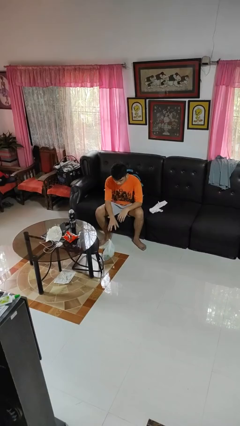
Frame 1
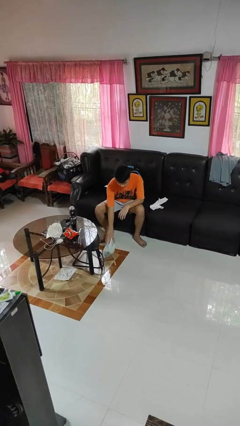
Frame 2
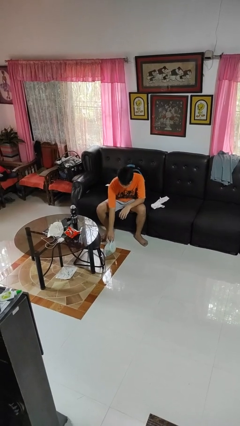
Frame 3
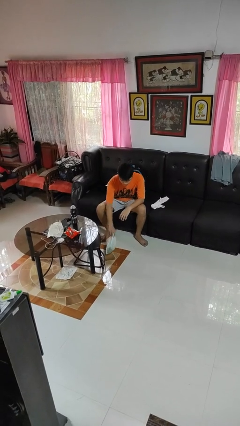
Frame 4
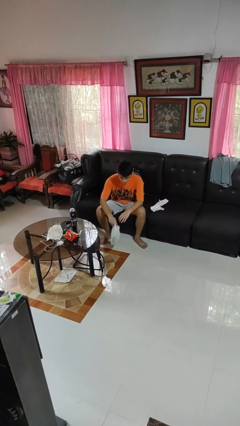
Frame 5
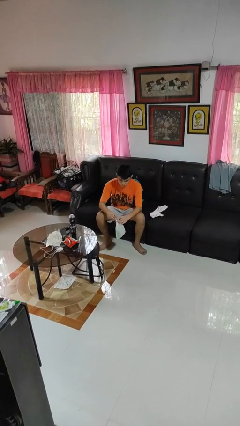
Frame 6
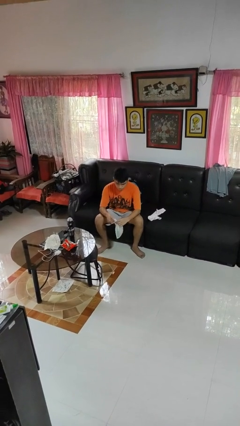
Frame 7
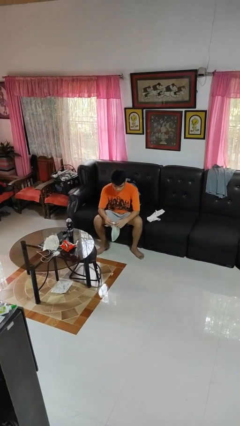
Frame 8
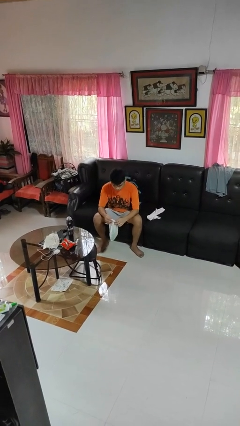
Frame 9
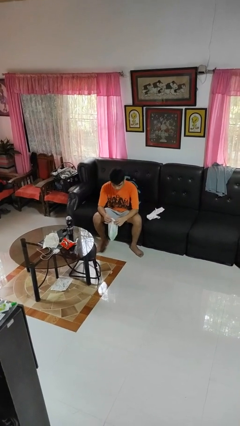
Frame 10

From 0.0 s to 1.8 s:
person picks up object from floor

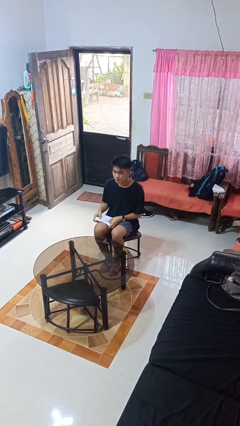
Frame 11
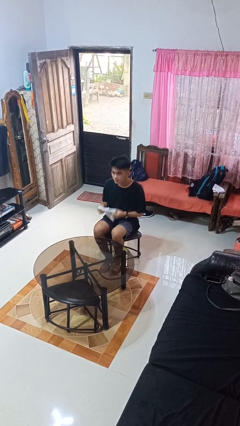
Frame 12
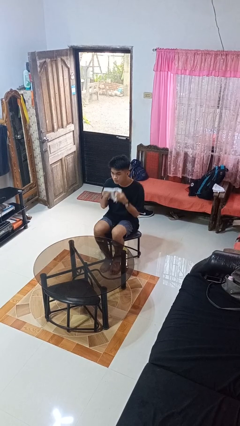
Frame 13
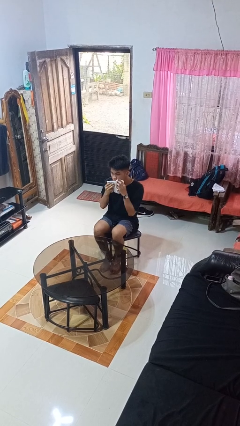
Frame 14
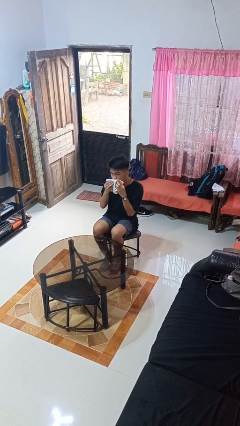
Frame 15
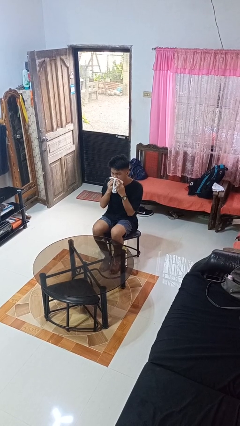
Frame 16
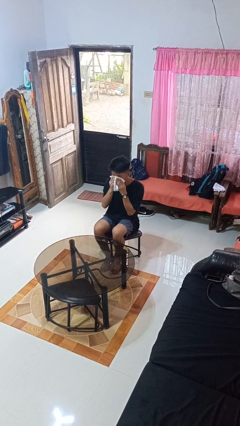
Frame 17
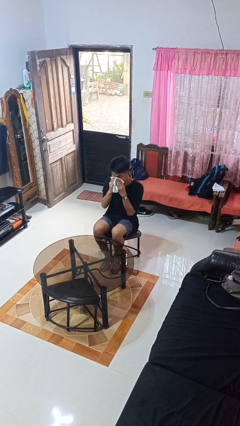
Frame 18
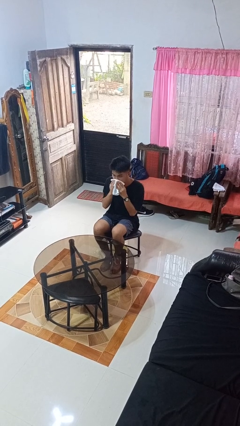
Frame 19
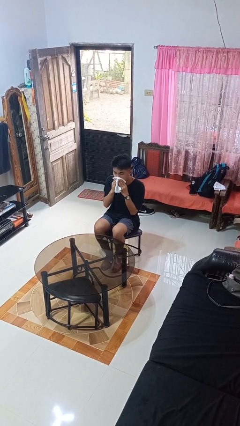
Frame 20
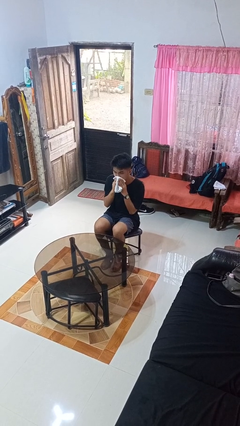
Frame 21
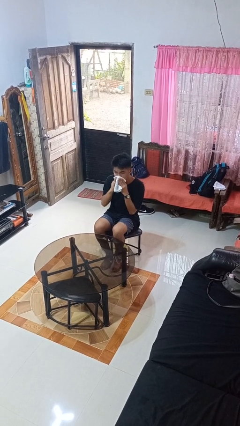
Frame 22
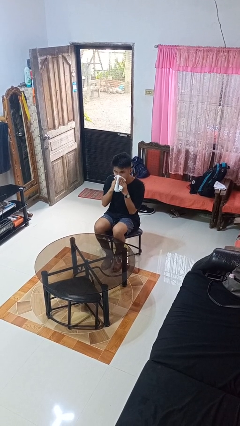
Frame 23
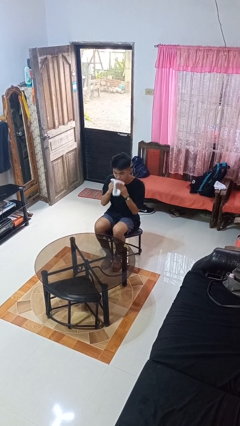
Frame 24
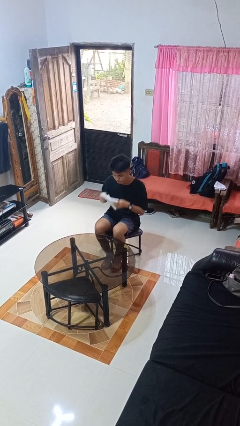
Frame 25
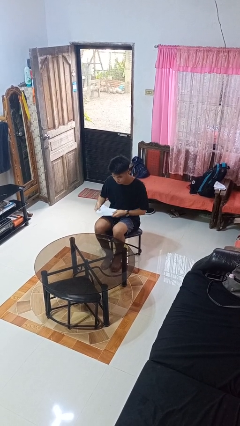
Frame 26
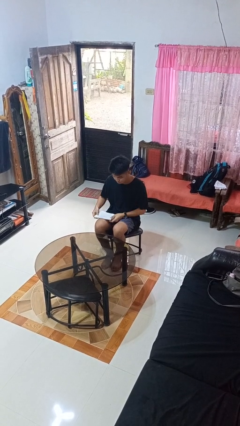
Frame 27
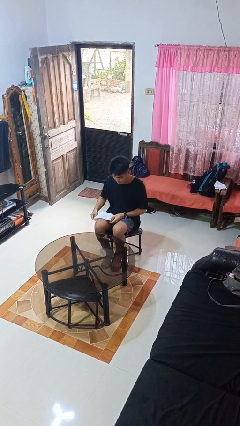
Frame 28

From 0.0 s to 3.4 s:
person wipes mouth with napkin

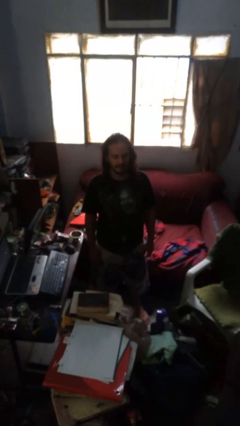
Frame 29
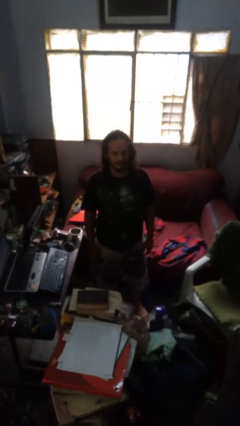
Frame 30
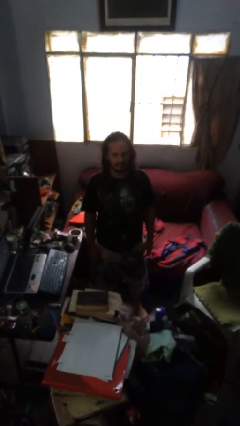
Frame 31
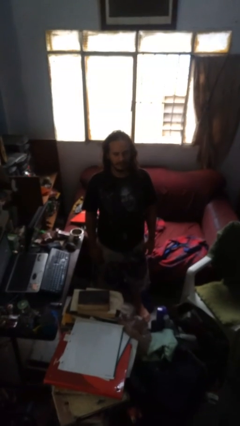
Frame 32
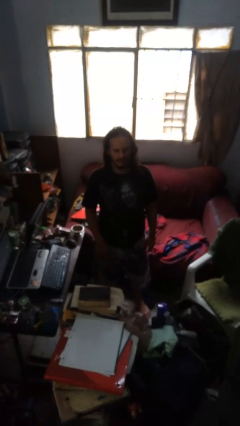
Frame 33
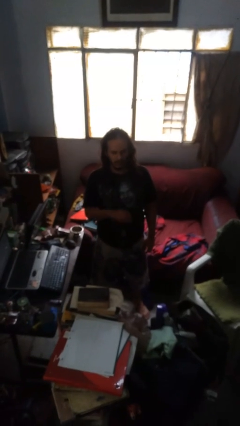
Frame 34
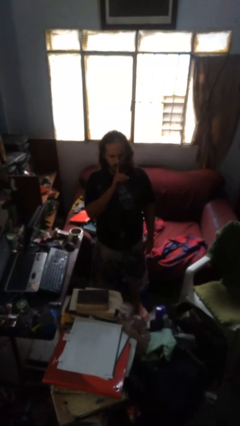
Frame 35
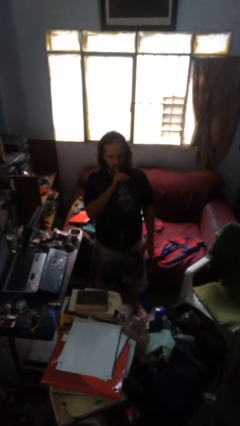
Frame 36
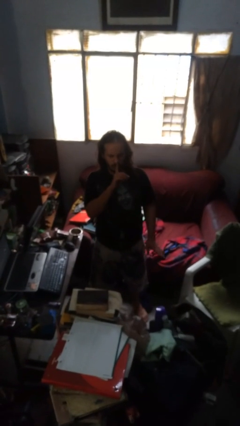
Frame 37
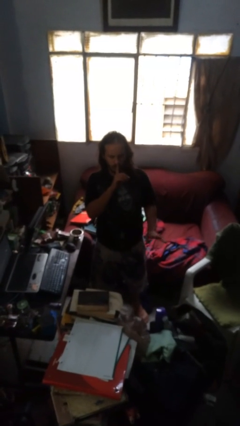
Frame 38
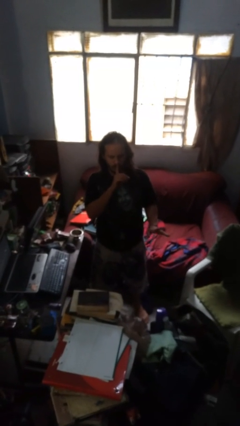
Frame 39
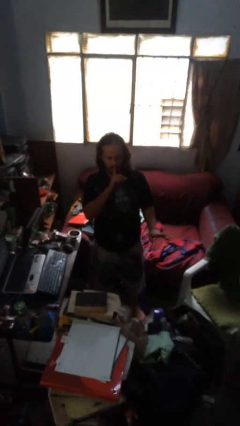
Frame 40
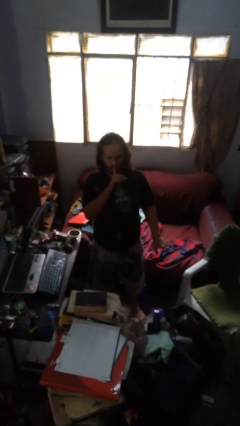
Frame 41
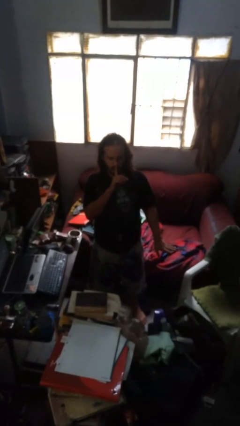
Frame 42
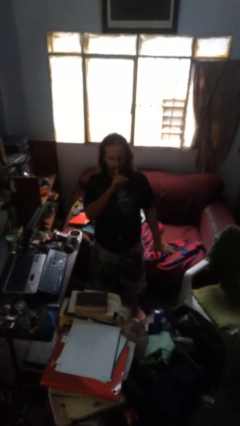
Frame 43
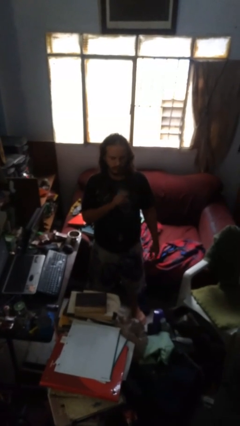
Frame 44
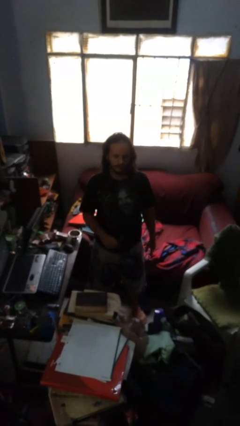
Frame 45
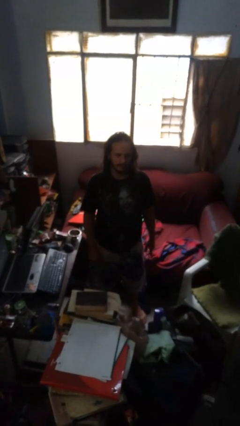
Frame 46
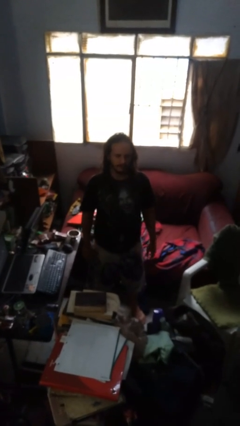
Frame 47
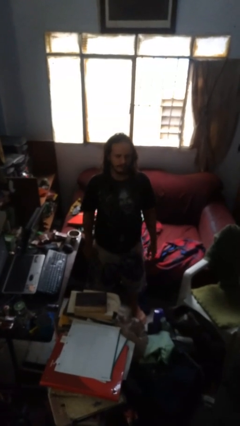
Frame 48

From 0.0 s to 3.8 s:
person gestures be quiet

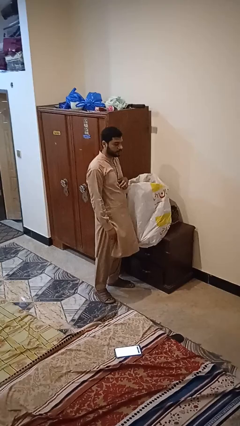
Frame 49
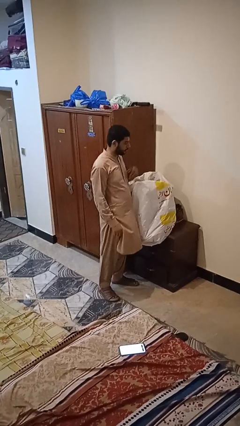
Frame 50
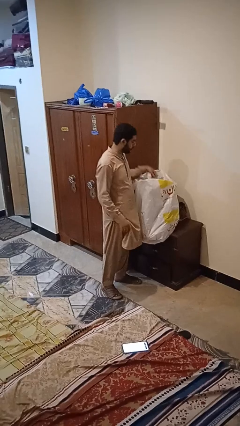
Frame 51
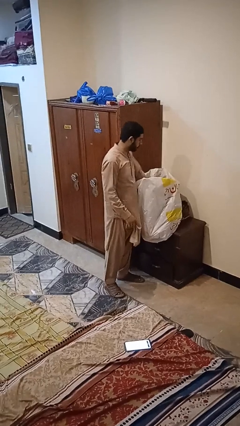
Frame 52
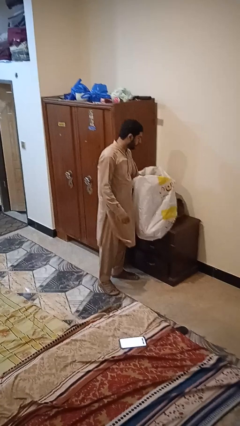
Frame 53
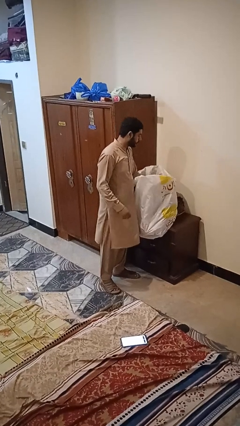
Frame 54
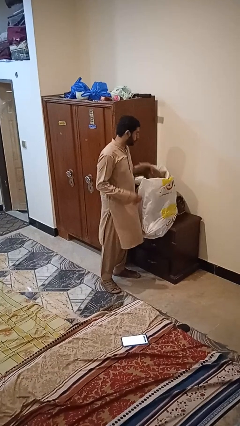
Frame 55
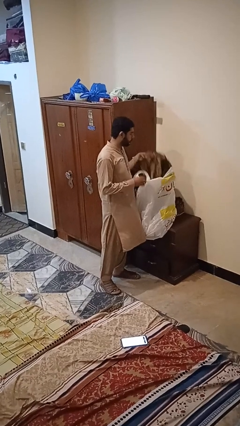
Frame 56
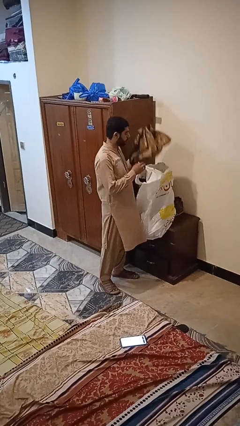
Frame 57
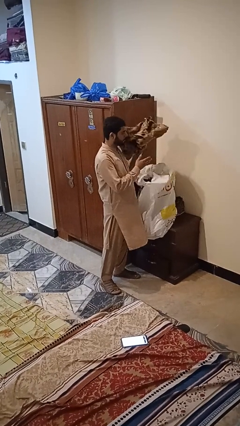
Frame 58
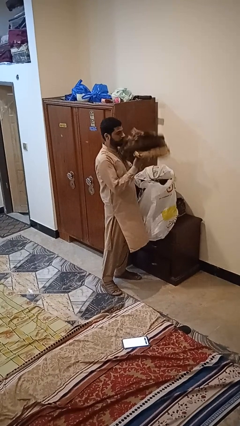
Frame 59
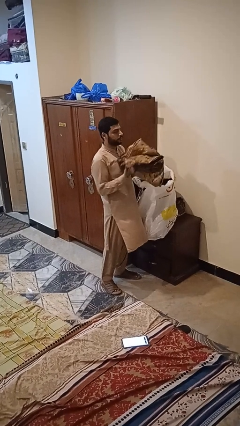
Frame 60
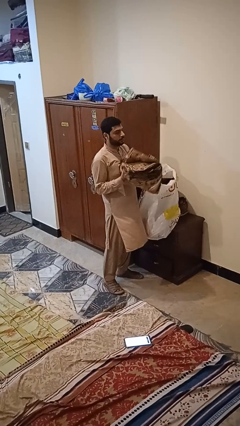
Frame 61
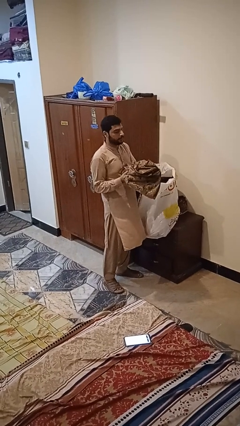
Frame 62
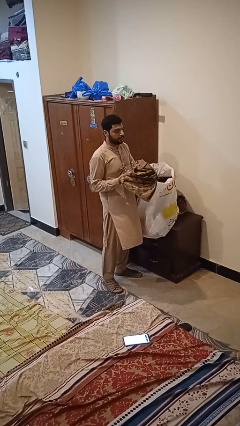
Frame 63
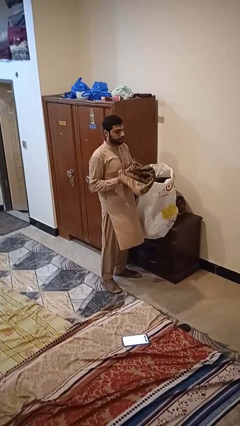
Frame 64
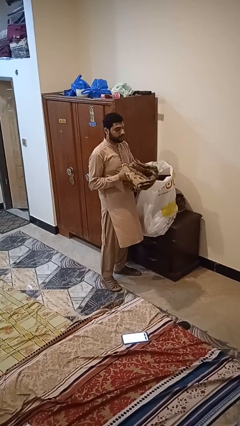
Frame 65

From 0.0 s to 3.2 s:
person takes object from bag

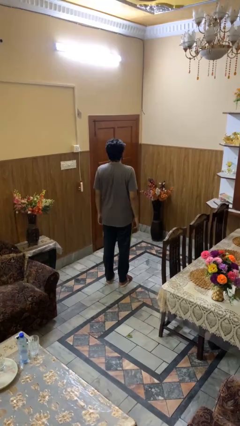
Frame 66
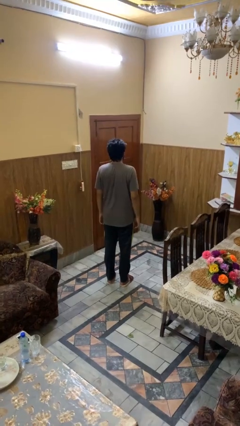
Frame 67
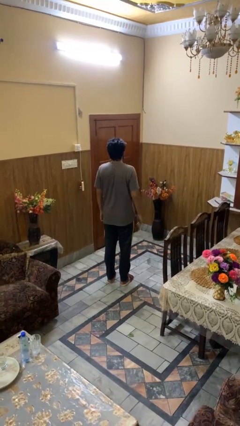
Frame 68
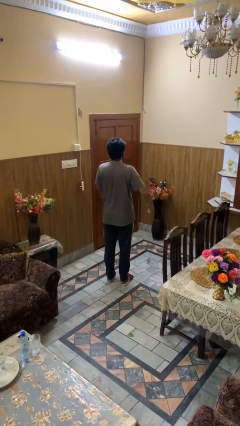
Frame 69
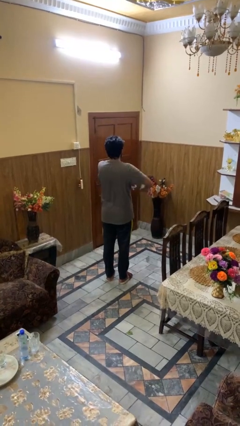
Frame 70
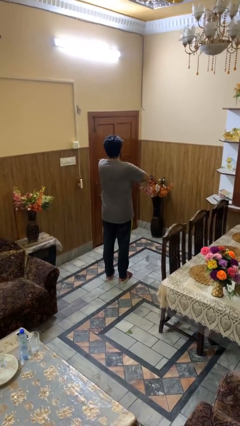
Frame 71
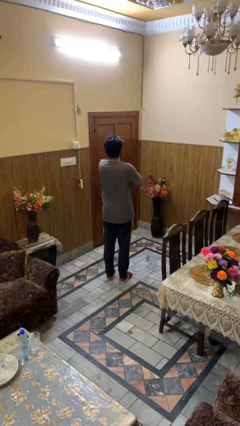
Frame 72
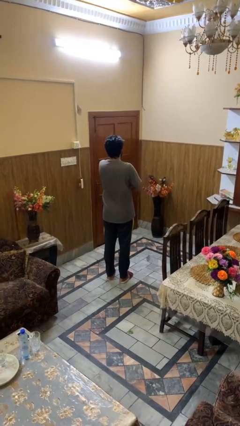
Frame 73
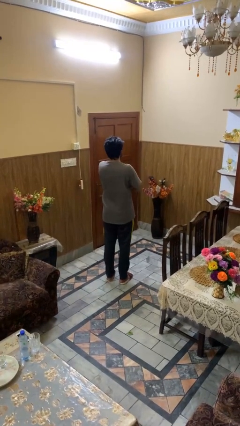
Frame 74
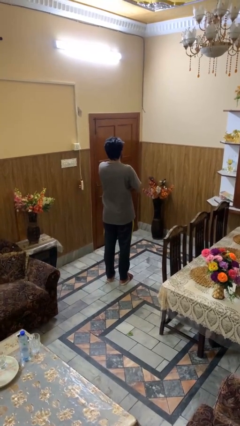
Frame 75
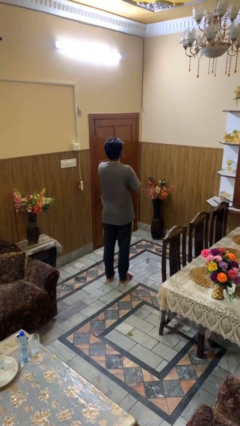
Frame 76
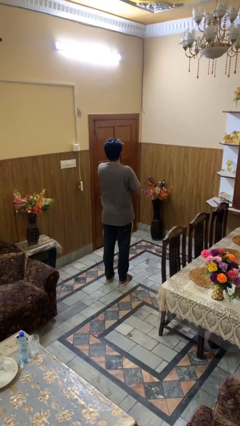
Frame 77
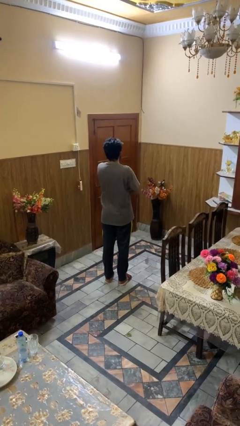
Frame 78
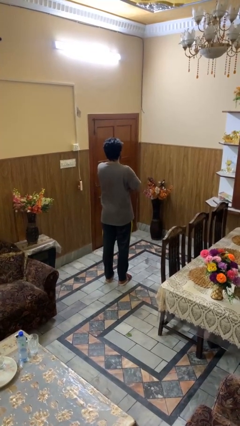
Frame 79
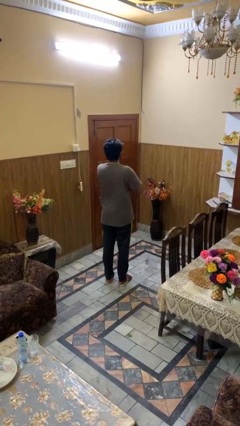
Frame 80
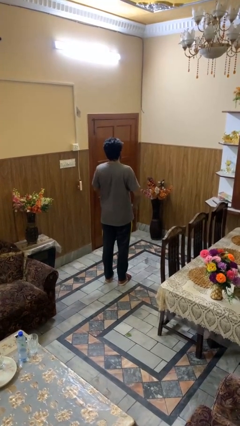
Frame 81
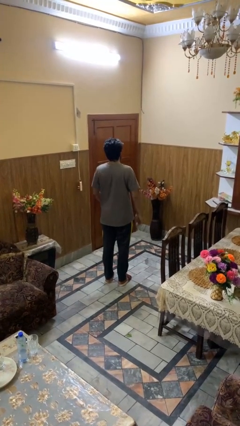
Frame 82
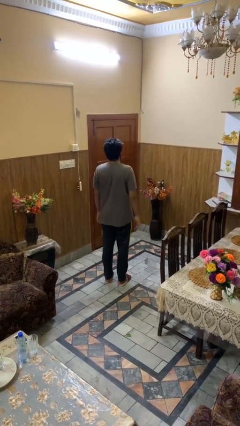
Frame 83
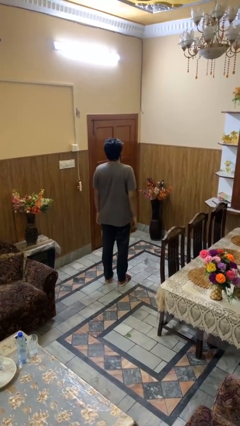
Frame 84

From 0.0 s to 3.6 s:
person crosses arms

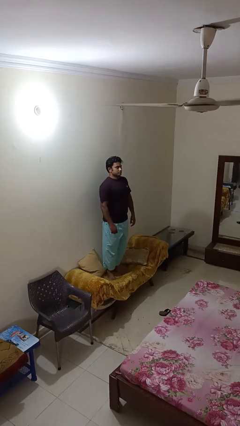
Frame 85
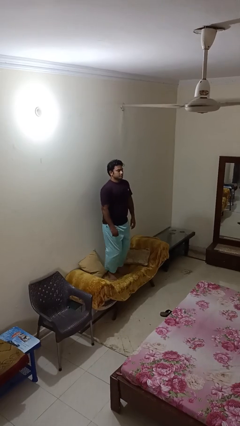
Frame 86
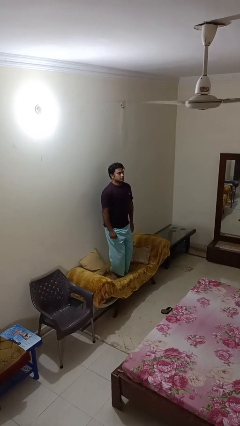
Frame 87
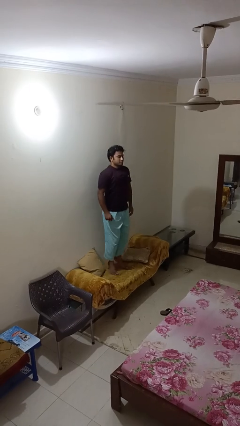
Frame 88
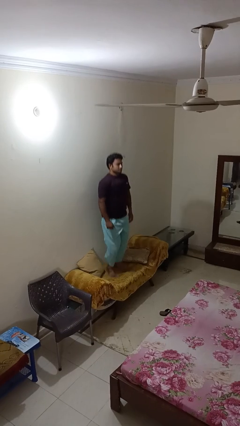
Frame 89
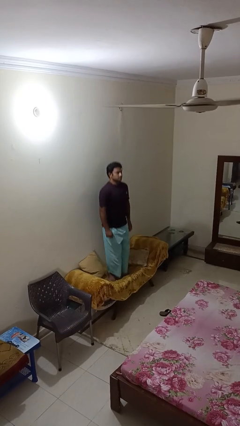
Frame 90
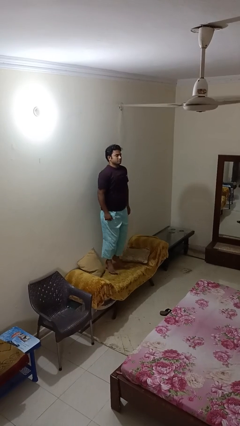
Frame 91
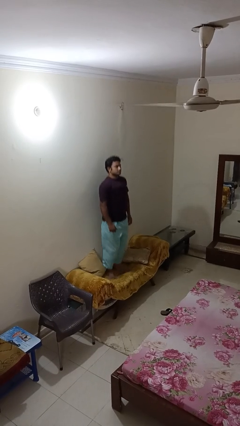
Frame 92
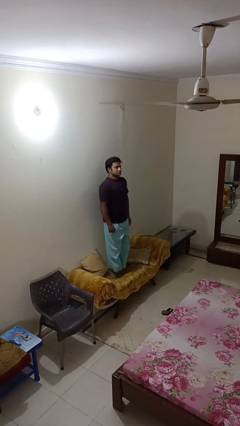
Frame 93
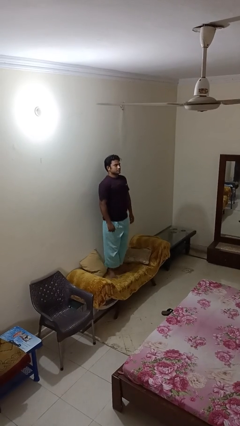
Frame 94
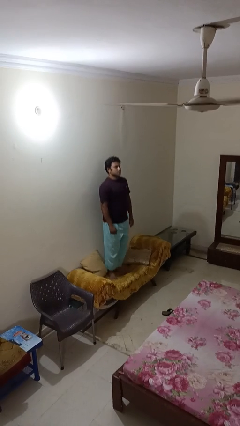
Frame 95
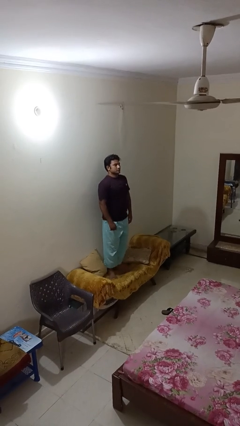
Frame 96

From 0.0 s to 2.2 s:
person jumps on couch
